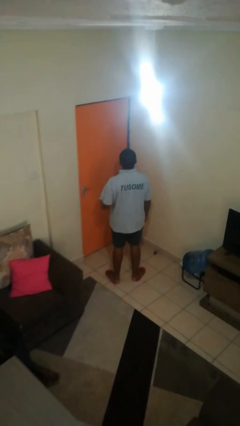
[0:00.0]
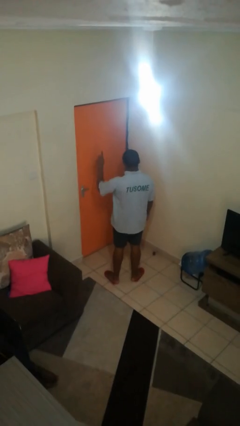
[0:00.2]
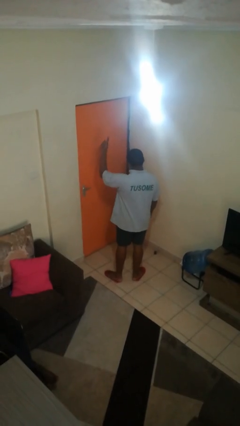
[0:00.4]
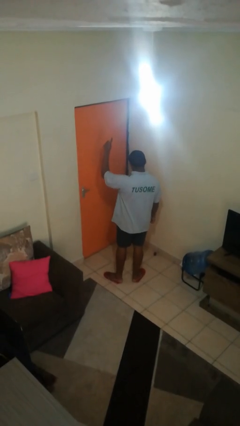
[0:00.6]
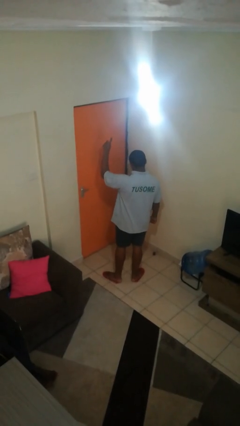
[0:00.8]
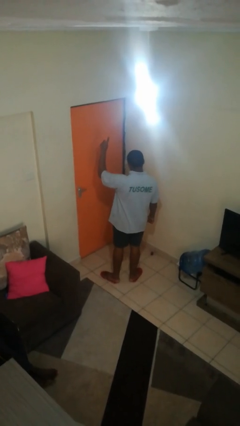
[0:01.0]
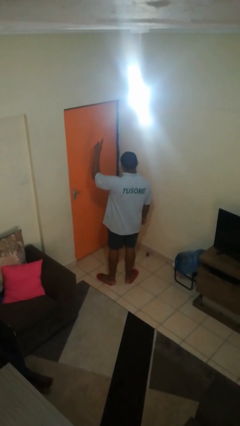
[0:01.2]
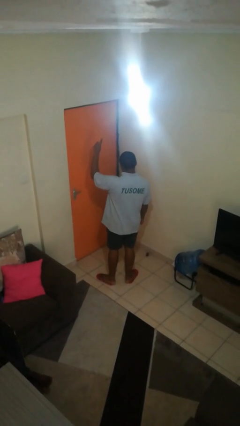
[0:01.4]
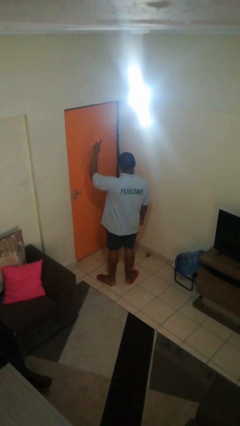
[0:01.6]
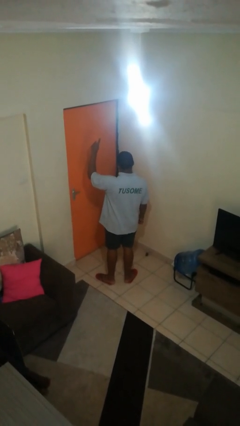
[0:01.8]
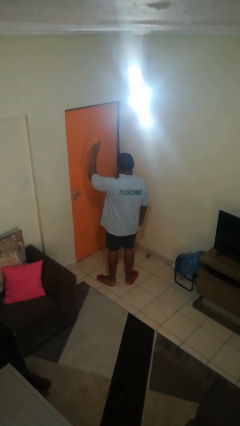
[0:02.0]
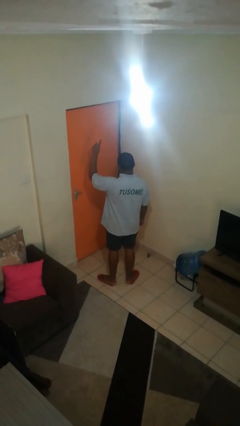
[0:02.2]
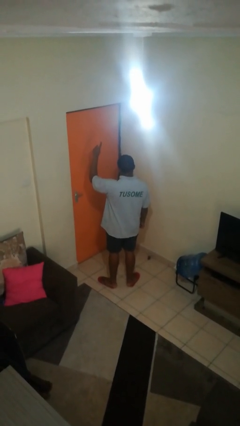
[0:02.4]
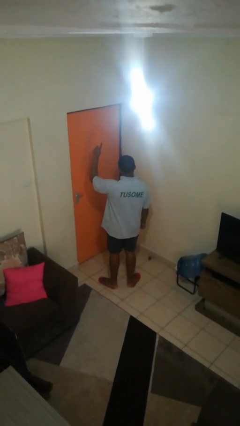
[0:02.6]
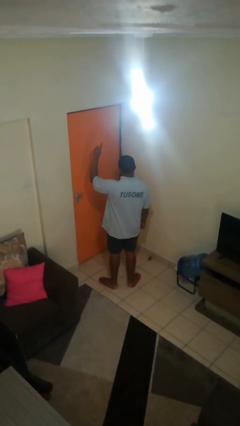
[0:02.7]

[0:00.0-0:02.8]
person gestures number one

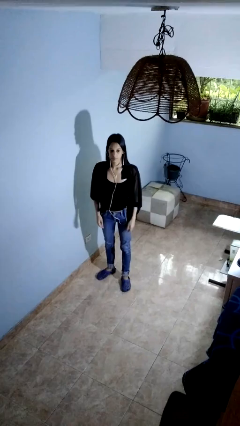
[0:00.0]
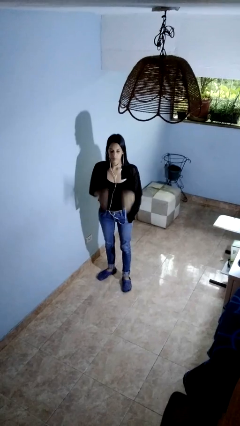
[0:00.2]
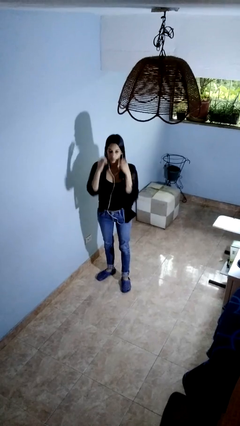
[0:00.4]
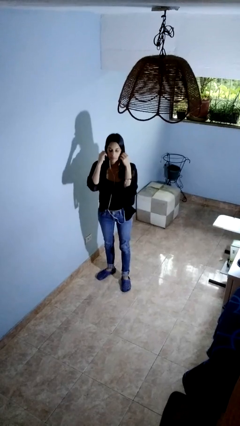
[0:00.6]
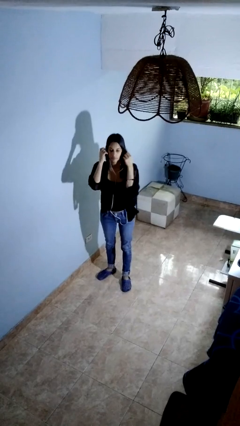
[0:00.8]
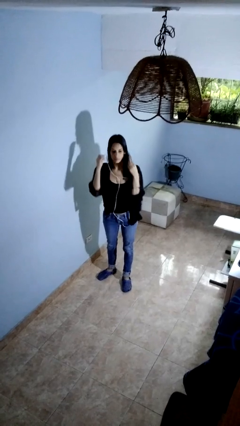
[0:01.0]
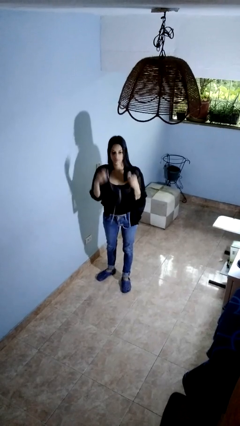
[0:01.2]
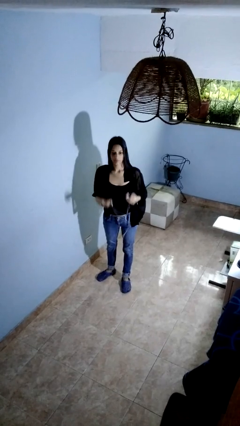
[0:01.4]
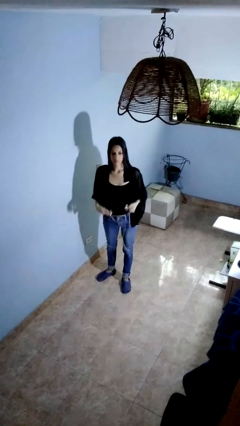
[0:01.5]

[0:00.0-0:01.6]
person takes off headphones

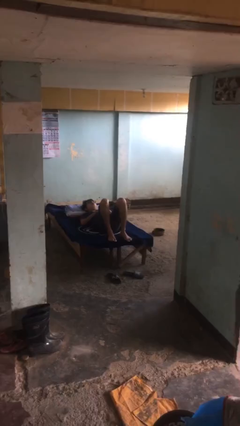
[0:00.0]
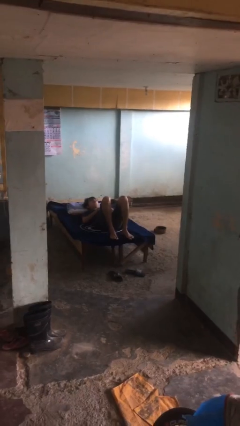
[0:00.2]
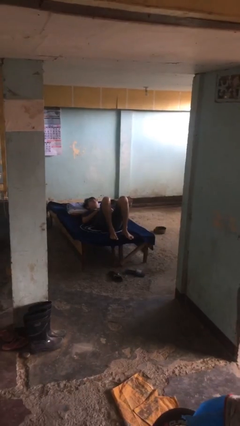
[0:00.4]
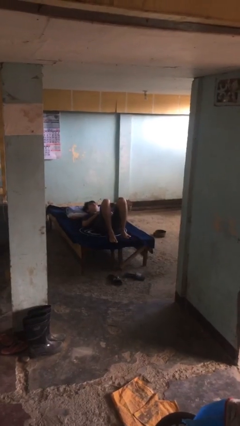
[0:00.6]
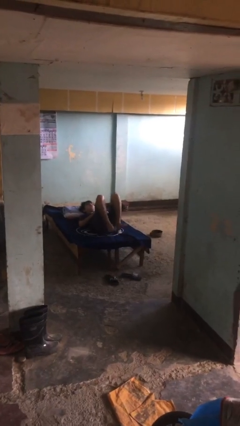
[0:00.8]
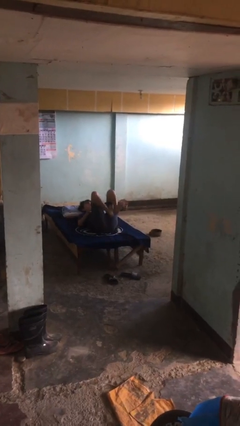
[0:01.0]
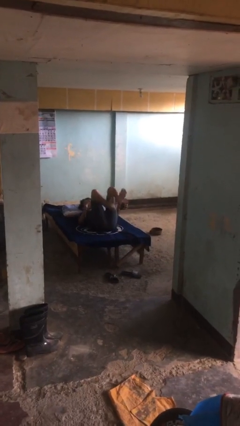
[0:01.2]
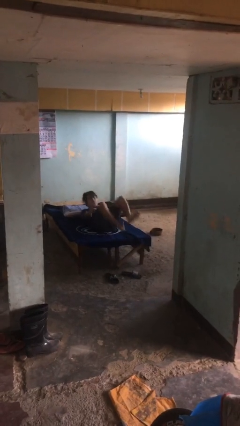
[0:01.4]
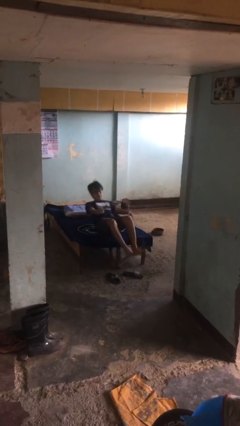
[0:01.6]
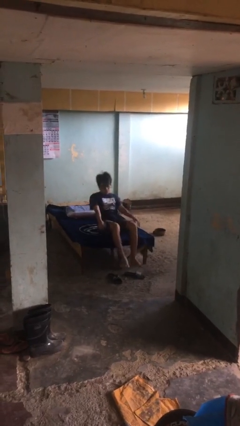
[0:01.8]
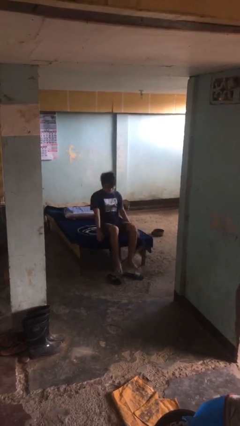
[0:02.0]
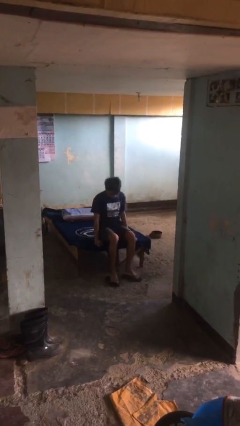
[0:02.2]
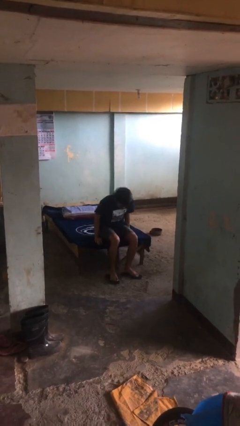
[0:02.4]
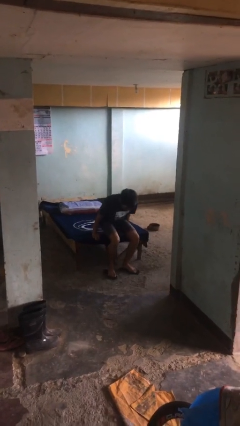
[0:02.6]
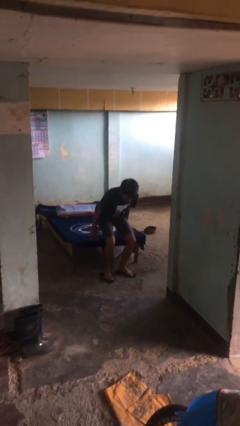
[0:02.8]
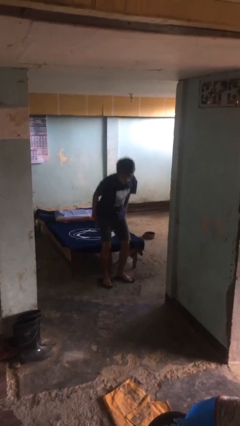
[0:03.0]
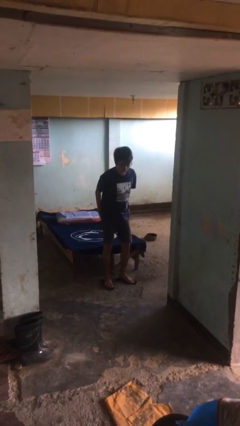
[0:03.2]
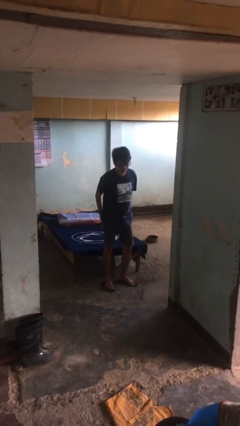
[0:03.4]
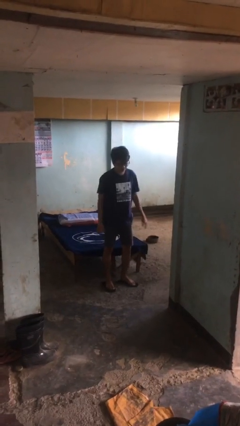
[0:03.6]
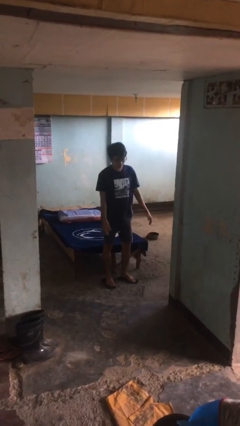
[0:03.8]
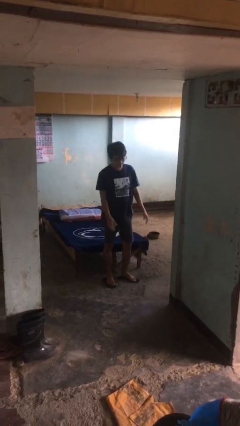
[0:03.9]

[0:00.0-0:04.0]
person stands up

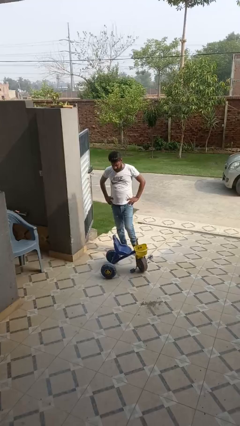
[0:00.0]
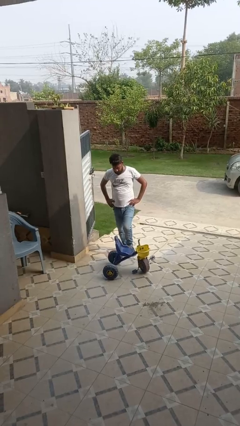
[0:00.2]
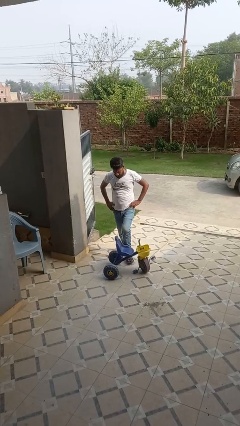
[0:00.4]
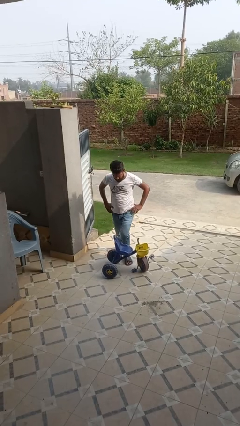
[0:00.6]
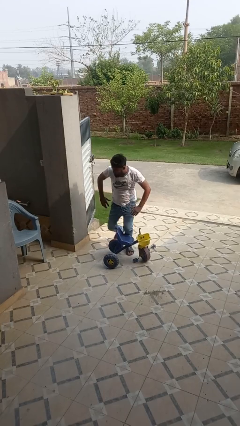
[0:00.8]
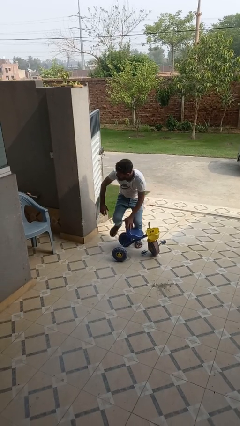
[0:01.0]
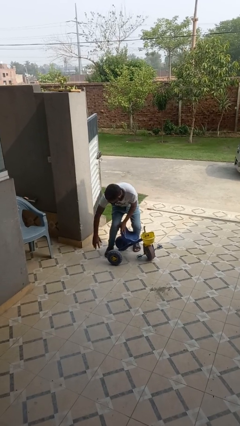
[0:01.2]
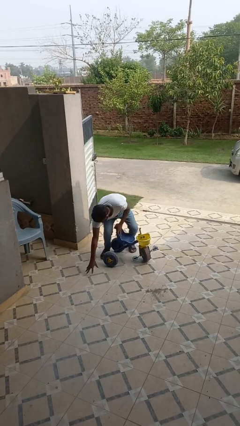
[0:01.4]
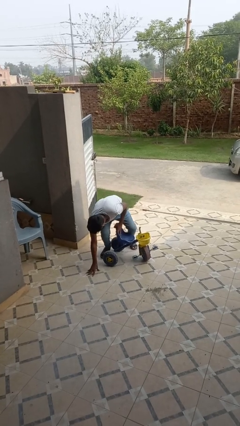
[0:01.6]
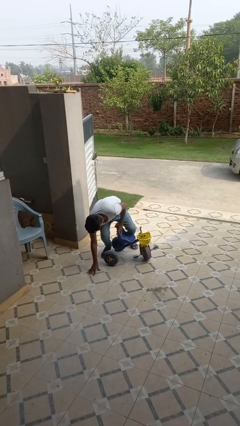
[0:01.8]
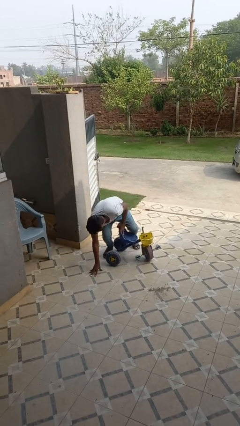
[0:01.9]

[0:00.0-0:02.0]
person trips on object on floor

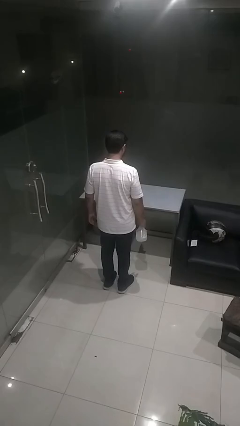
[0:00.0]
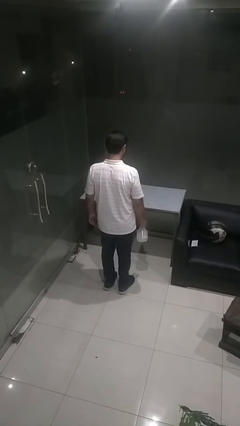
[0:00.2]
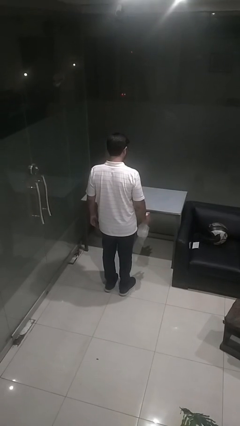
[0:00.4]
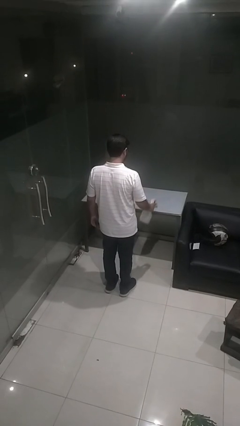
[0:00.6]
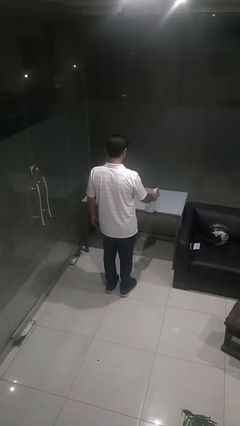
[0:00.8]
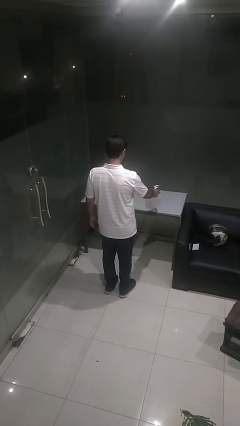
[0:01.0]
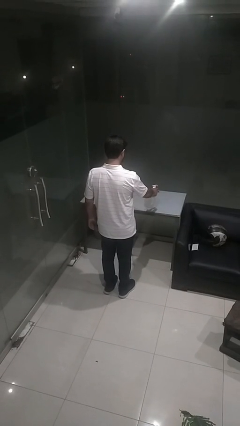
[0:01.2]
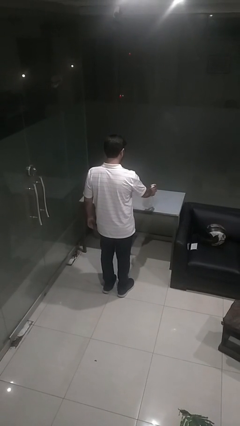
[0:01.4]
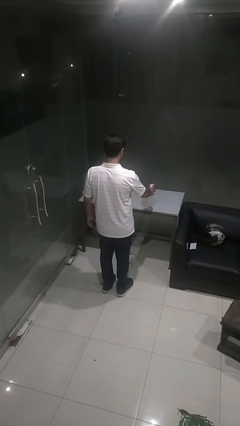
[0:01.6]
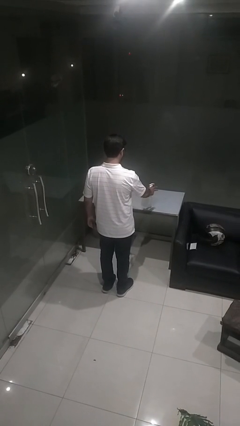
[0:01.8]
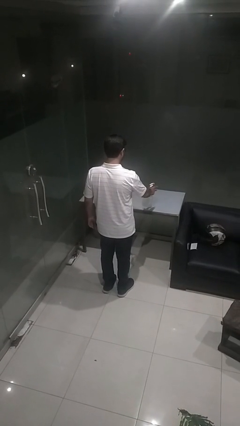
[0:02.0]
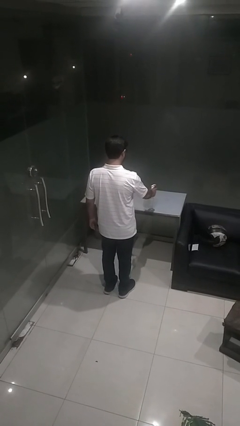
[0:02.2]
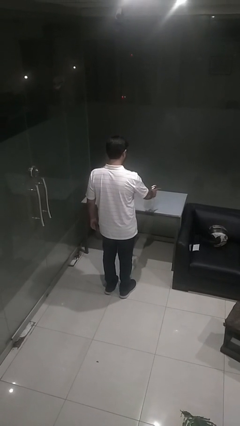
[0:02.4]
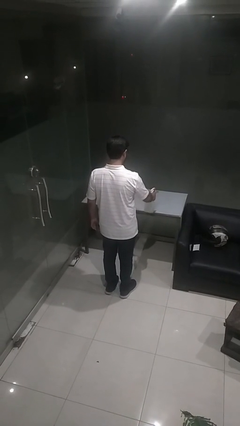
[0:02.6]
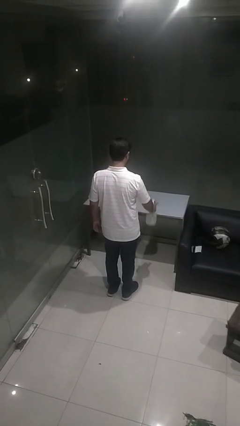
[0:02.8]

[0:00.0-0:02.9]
person sprays from bottle

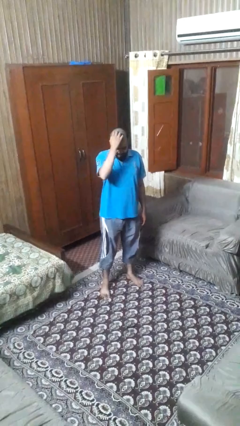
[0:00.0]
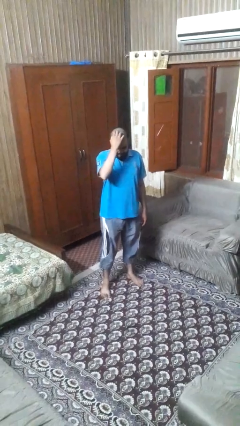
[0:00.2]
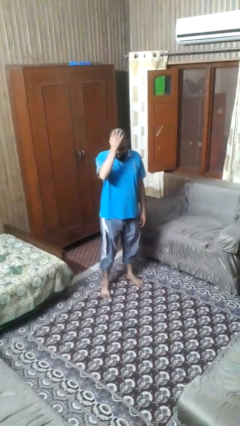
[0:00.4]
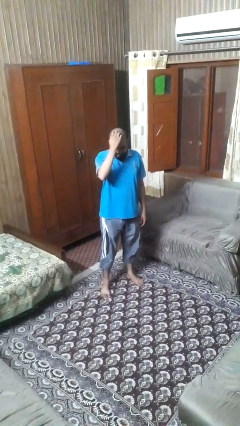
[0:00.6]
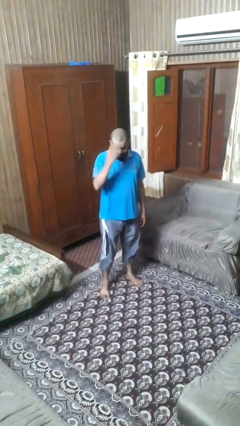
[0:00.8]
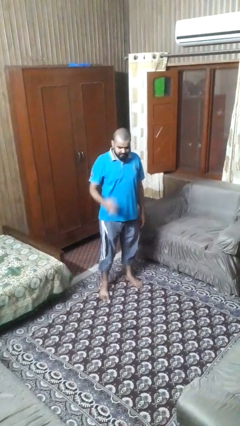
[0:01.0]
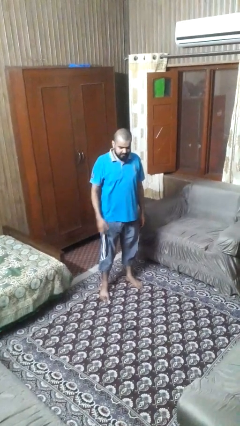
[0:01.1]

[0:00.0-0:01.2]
person scratches face

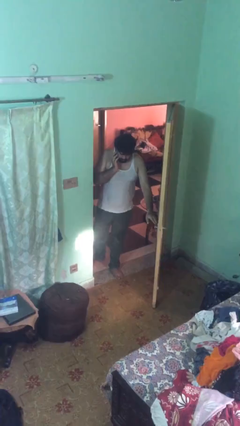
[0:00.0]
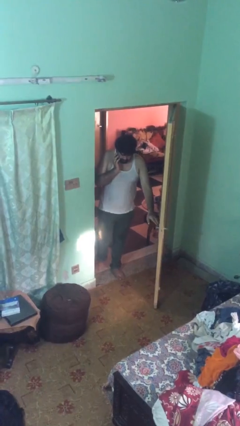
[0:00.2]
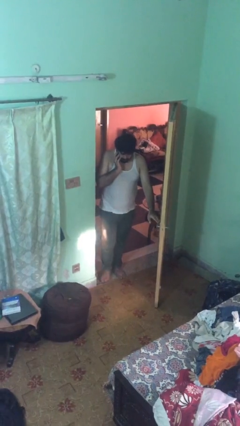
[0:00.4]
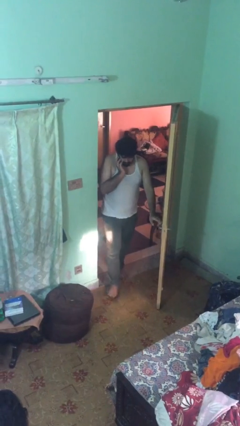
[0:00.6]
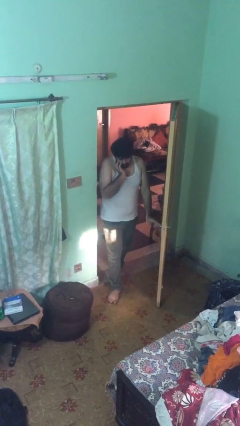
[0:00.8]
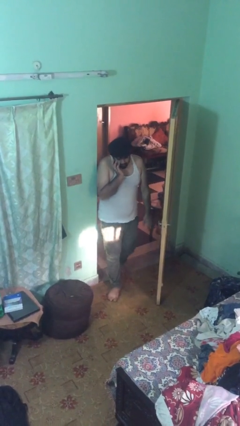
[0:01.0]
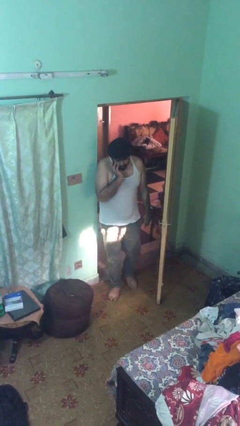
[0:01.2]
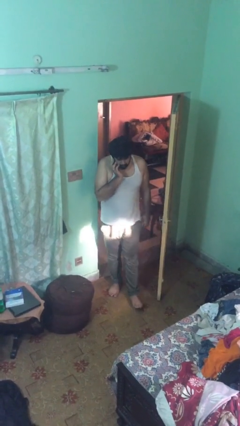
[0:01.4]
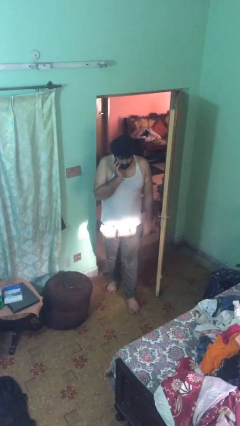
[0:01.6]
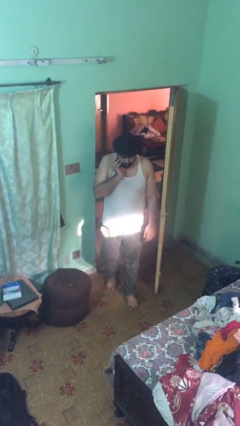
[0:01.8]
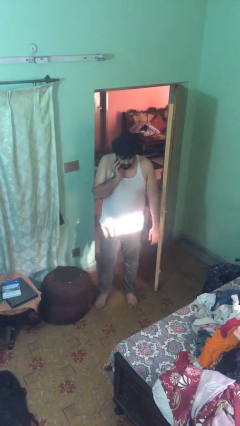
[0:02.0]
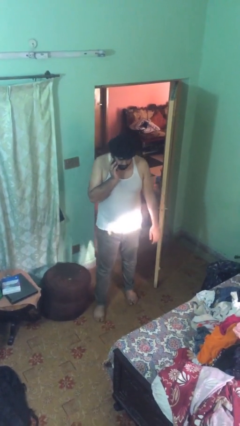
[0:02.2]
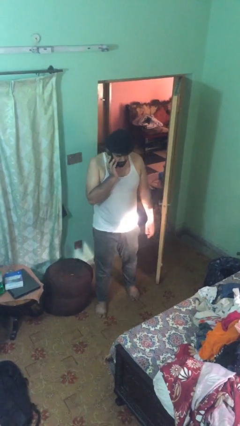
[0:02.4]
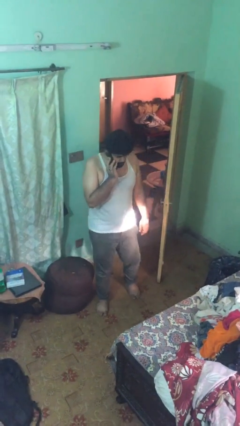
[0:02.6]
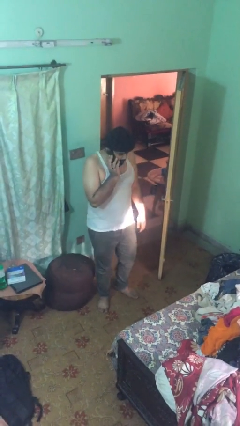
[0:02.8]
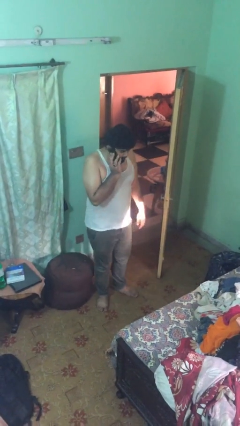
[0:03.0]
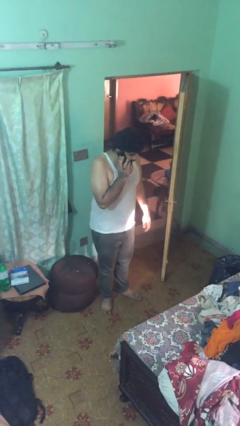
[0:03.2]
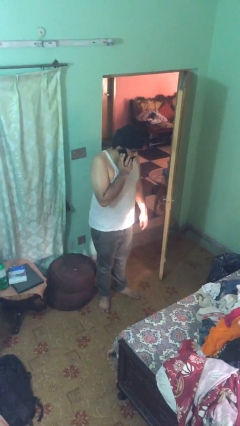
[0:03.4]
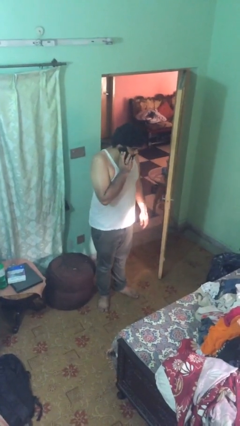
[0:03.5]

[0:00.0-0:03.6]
person enters scene through structure
